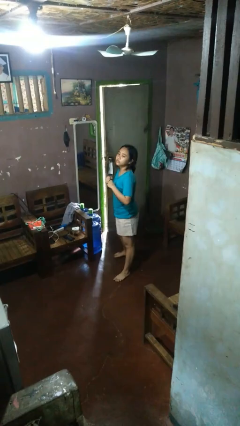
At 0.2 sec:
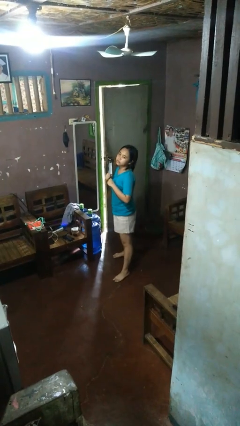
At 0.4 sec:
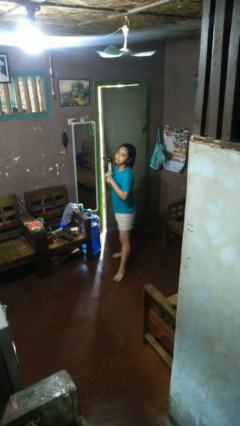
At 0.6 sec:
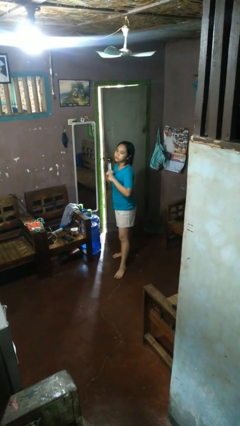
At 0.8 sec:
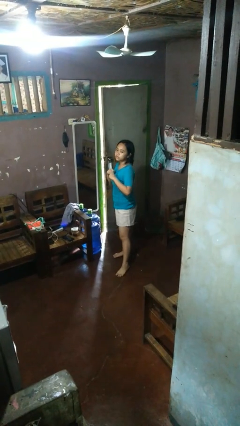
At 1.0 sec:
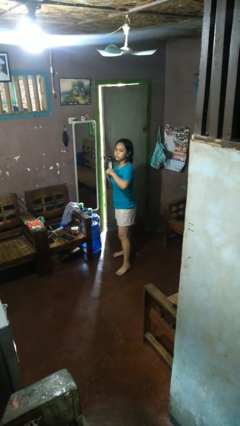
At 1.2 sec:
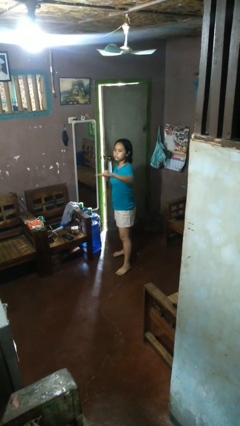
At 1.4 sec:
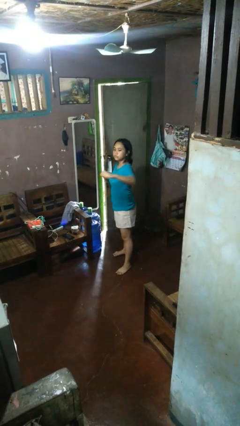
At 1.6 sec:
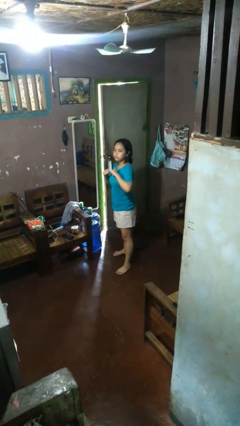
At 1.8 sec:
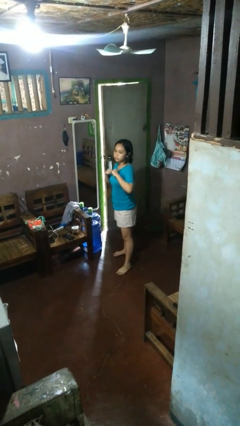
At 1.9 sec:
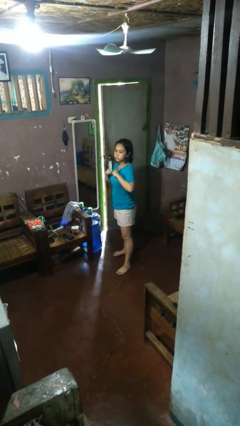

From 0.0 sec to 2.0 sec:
person karate chop

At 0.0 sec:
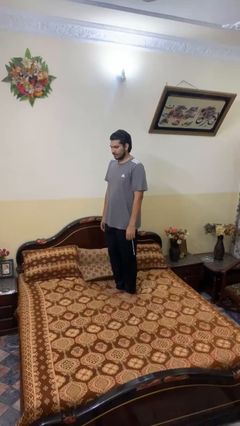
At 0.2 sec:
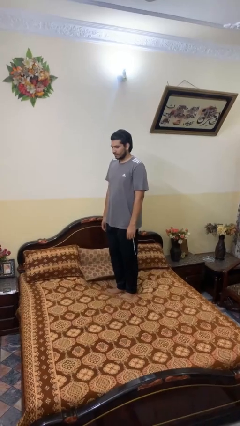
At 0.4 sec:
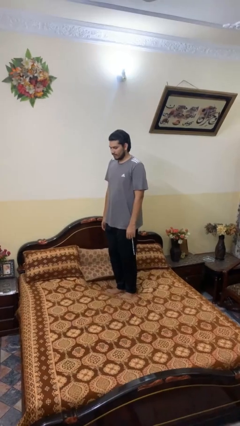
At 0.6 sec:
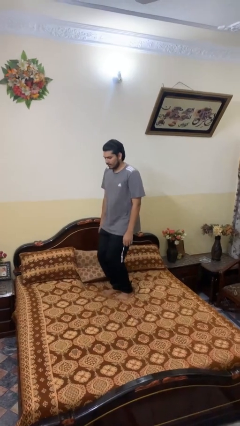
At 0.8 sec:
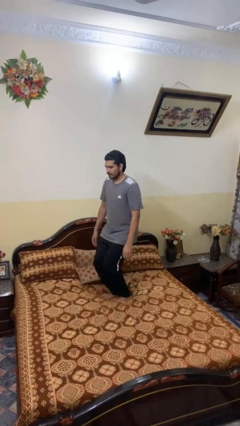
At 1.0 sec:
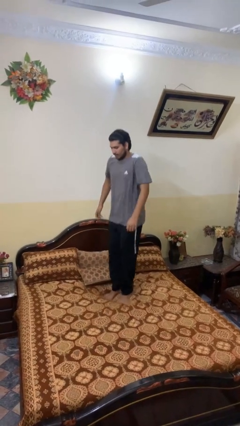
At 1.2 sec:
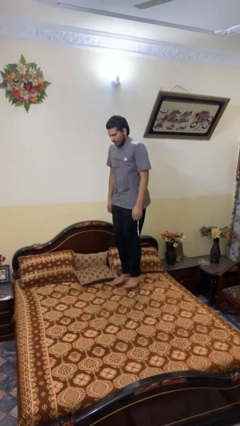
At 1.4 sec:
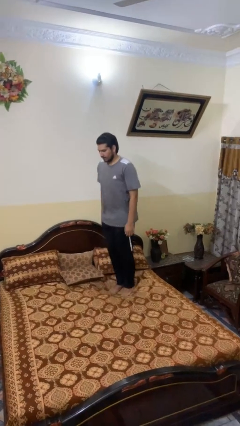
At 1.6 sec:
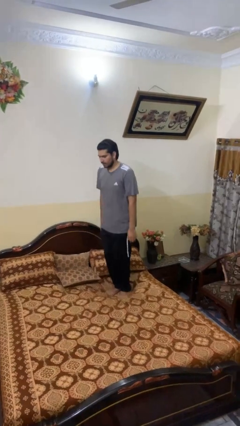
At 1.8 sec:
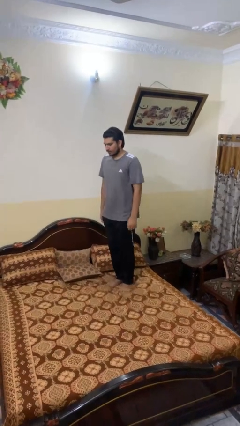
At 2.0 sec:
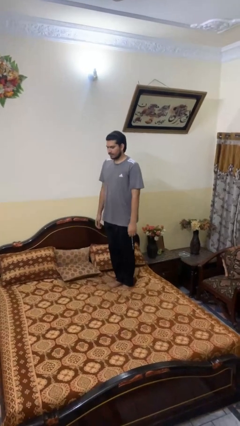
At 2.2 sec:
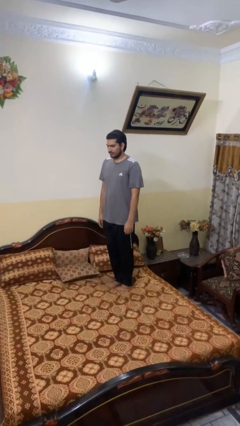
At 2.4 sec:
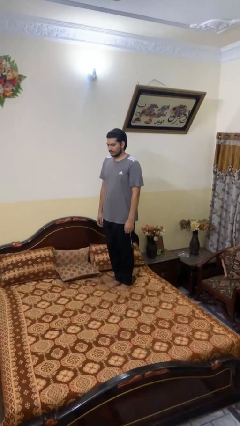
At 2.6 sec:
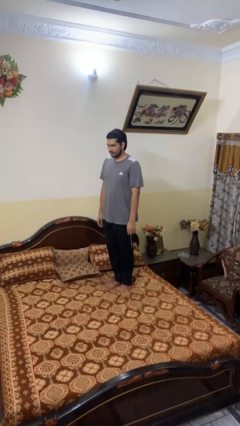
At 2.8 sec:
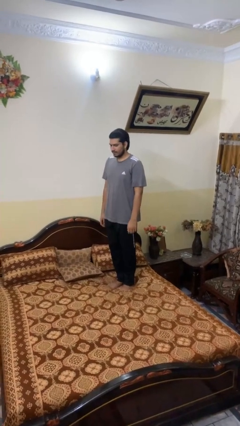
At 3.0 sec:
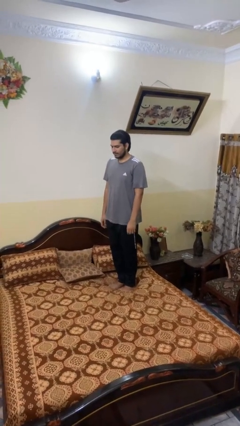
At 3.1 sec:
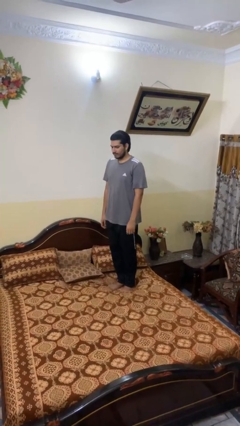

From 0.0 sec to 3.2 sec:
person jumps on bed

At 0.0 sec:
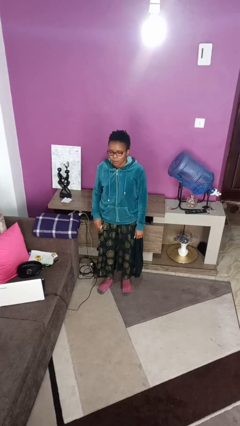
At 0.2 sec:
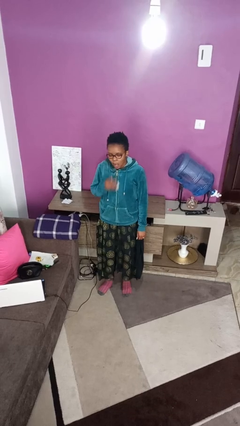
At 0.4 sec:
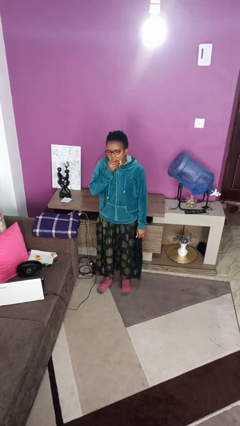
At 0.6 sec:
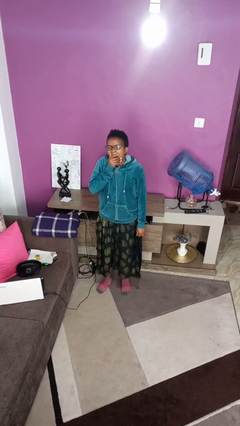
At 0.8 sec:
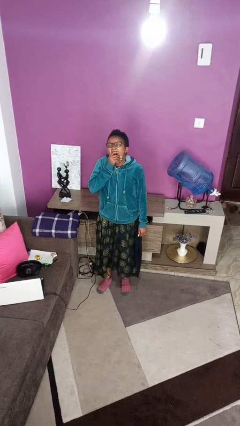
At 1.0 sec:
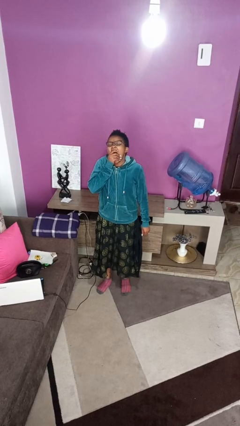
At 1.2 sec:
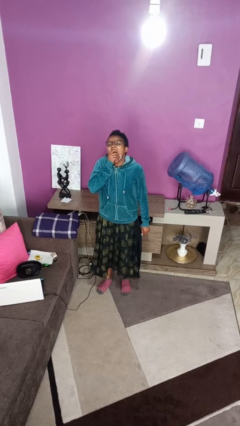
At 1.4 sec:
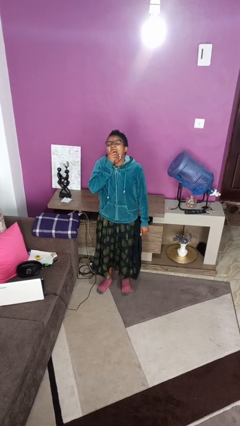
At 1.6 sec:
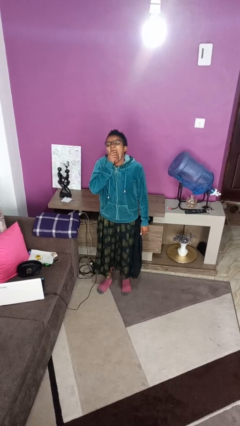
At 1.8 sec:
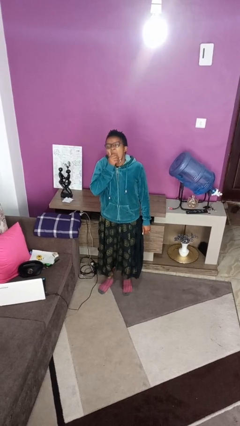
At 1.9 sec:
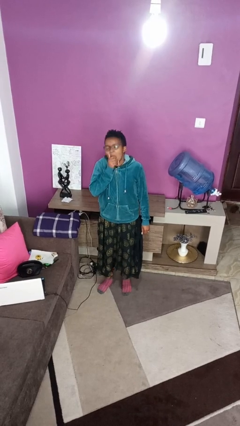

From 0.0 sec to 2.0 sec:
person yawns

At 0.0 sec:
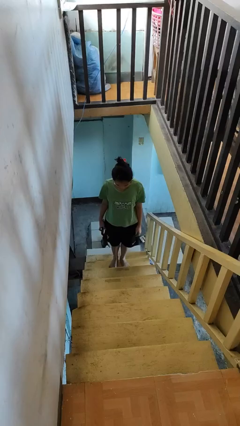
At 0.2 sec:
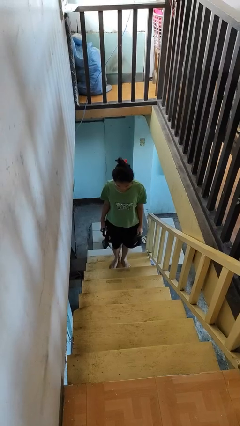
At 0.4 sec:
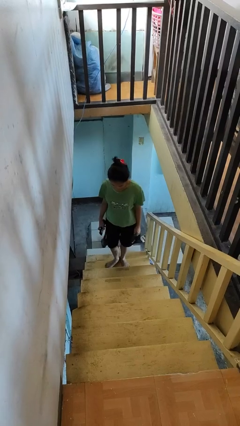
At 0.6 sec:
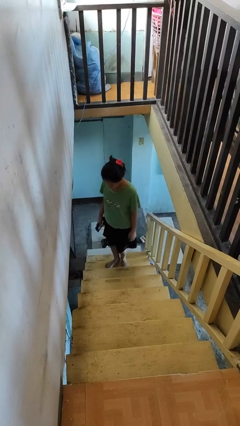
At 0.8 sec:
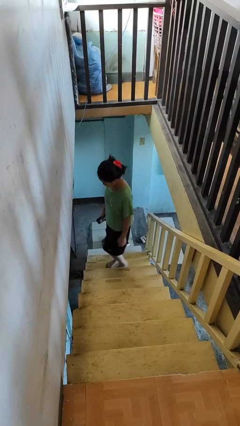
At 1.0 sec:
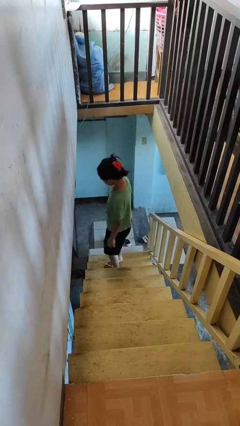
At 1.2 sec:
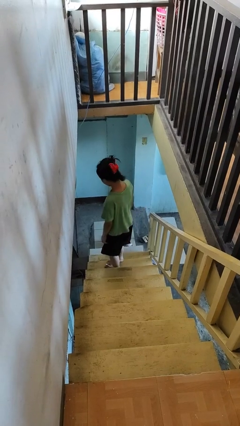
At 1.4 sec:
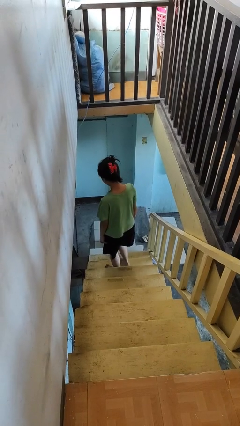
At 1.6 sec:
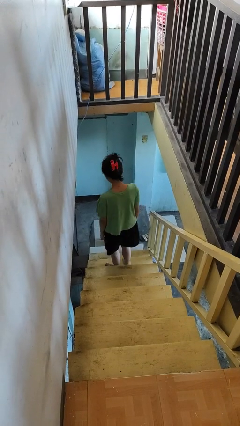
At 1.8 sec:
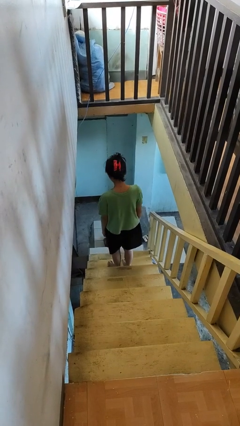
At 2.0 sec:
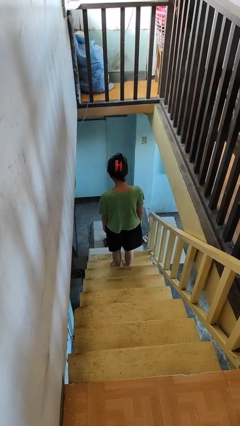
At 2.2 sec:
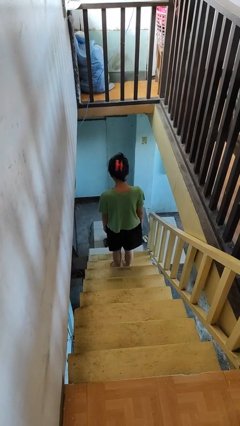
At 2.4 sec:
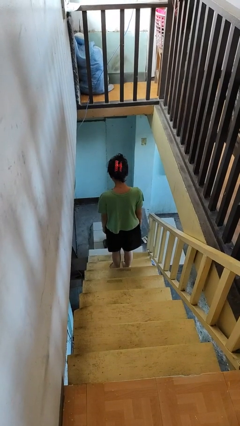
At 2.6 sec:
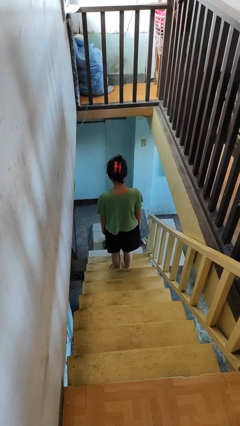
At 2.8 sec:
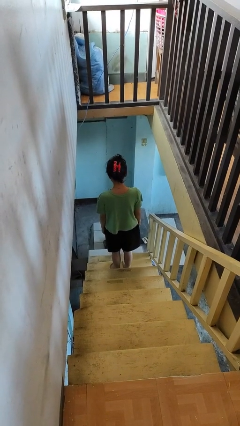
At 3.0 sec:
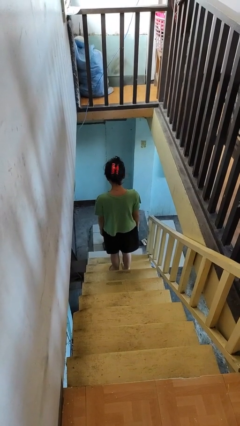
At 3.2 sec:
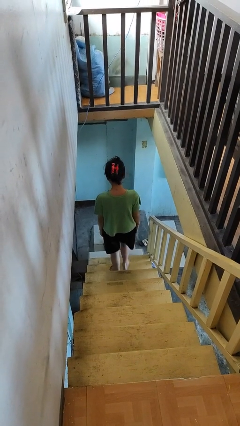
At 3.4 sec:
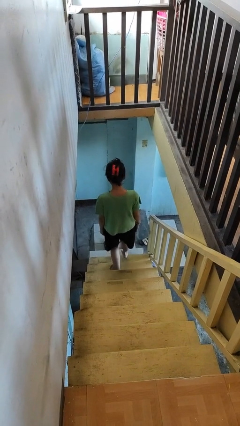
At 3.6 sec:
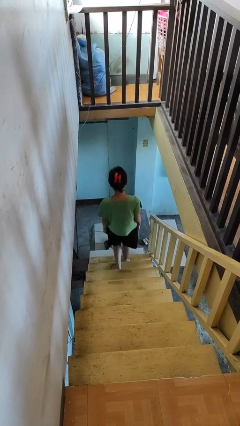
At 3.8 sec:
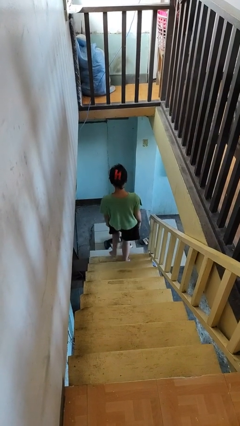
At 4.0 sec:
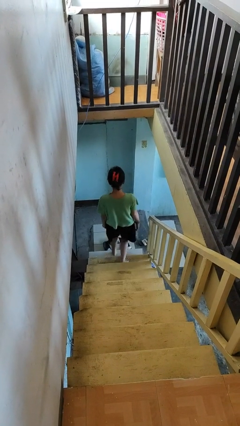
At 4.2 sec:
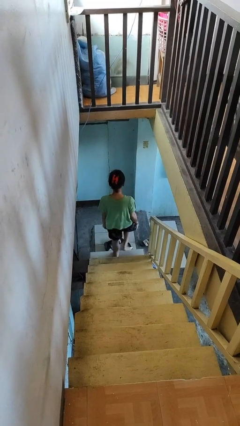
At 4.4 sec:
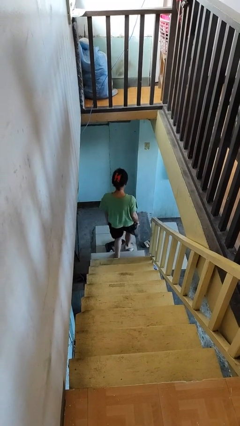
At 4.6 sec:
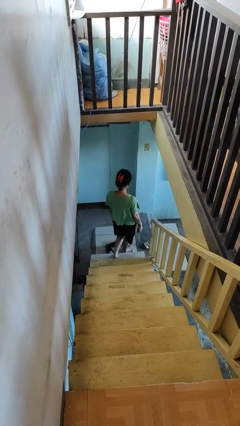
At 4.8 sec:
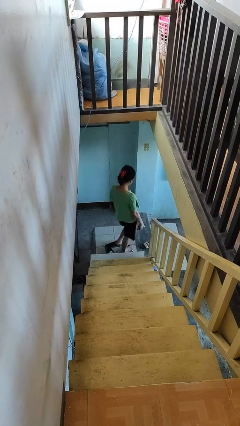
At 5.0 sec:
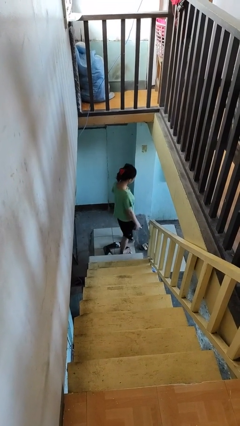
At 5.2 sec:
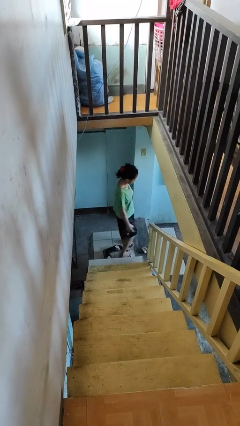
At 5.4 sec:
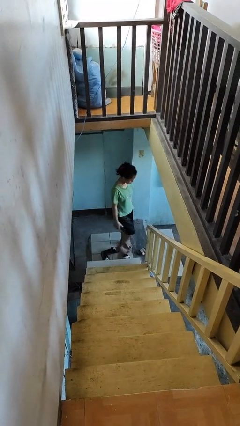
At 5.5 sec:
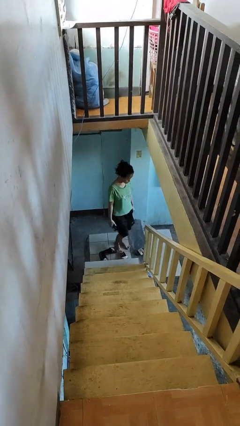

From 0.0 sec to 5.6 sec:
person climbs down stairs

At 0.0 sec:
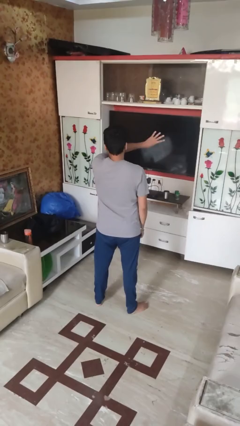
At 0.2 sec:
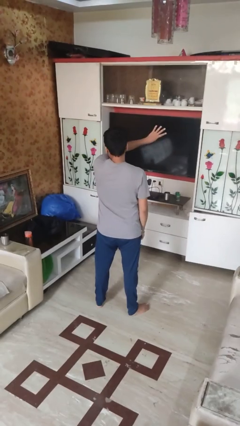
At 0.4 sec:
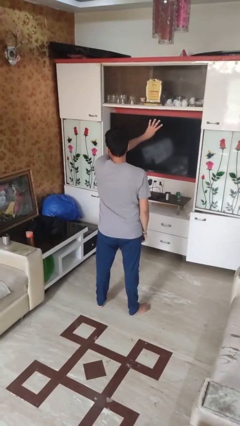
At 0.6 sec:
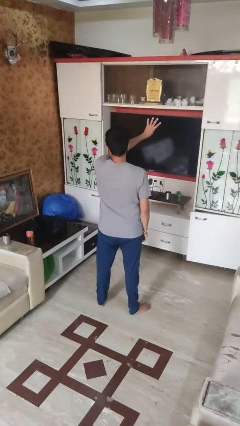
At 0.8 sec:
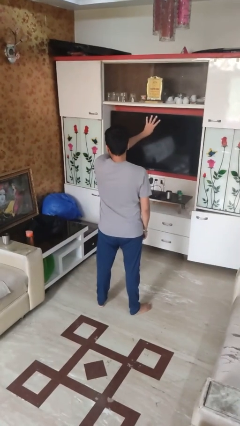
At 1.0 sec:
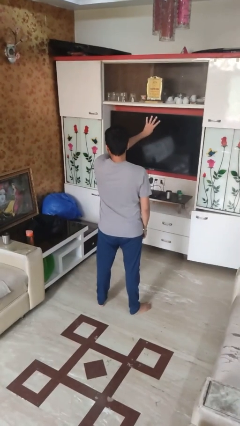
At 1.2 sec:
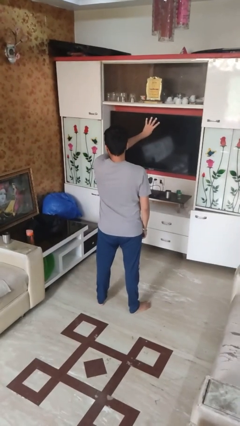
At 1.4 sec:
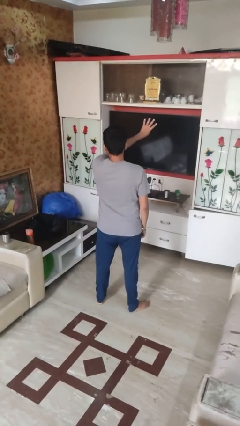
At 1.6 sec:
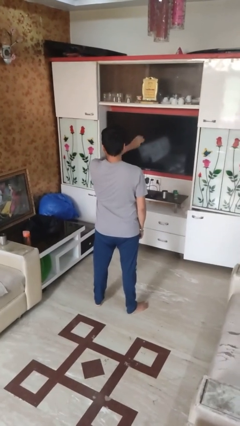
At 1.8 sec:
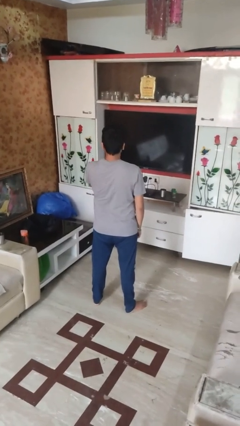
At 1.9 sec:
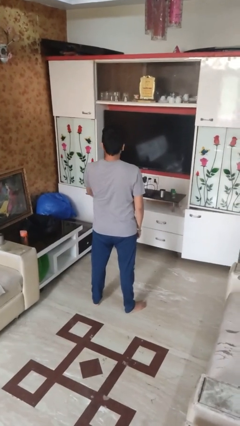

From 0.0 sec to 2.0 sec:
person gestures number four

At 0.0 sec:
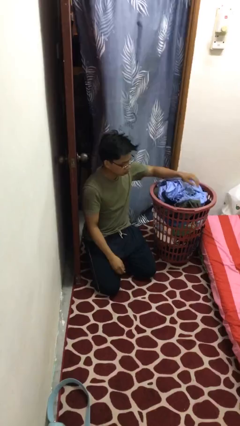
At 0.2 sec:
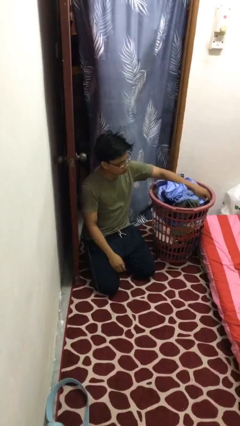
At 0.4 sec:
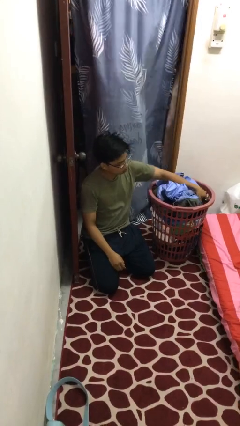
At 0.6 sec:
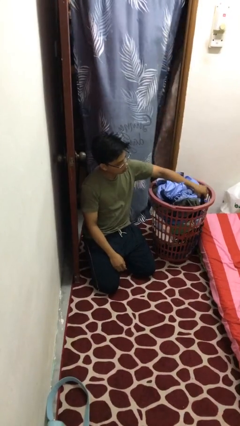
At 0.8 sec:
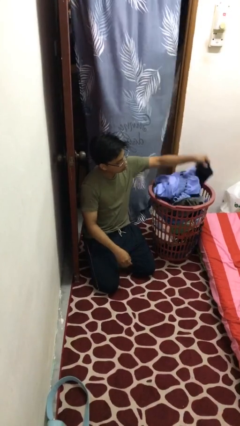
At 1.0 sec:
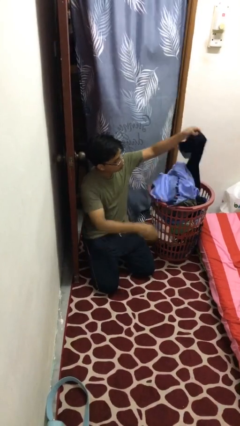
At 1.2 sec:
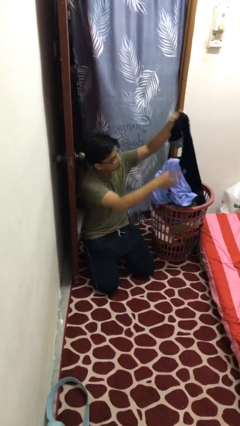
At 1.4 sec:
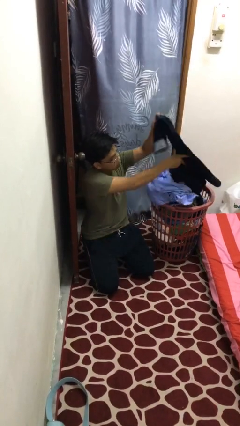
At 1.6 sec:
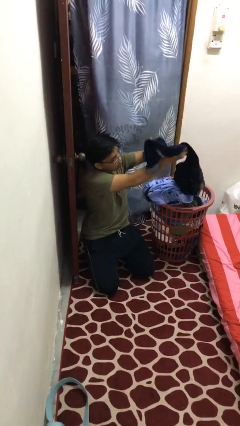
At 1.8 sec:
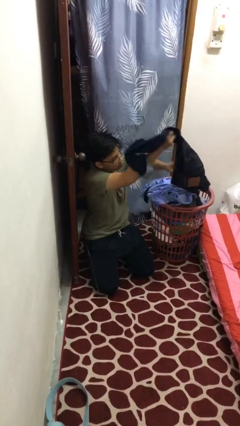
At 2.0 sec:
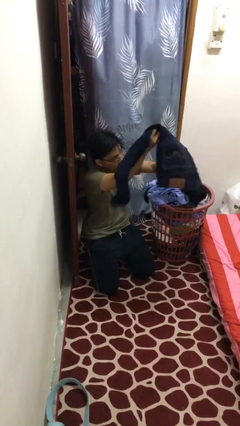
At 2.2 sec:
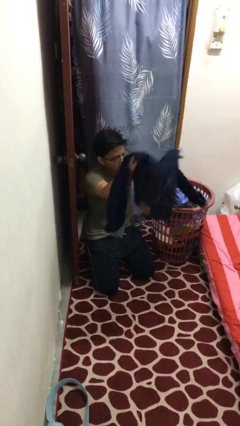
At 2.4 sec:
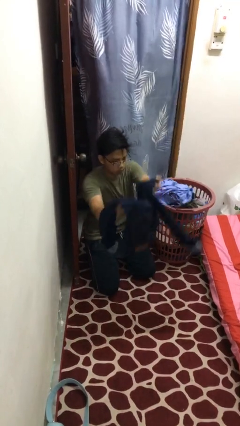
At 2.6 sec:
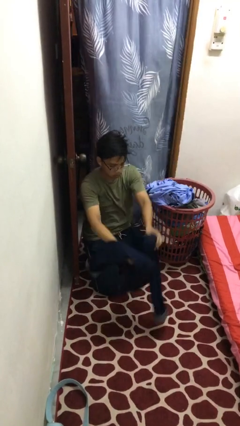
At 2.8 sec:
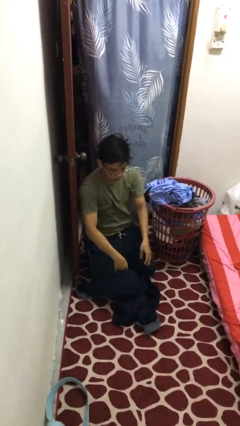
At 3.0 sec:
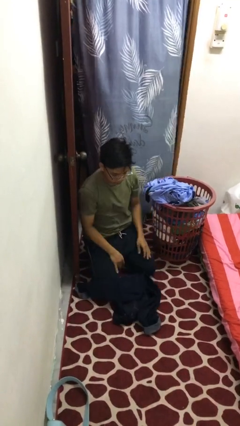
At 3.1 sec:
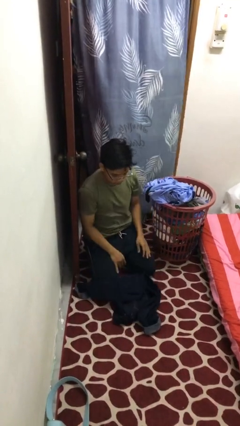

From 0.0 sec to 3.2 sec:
person takes object from basket
